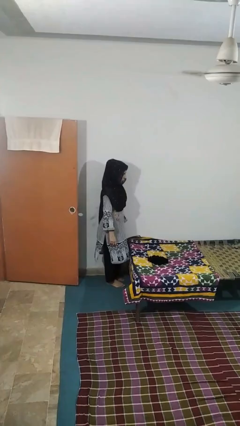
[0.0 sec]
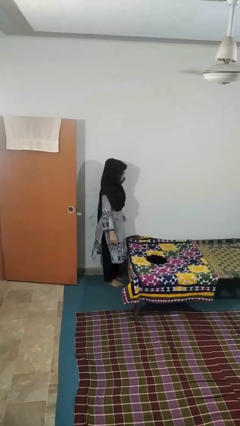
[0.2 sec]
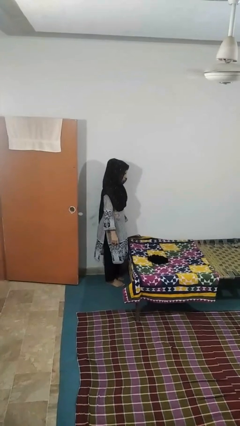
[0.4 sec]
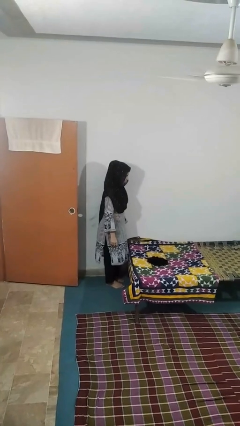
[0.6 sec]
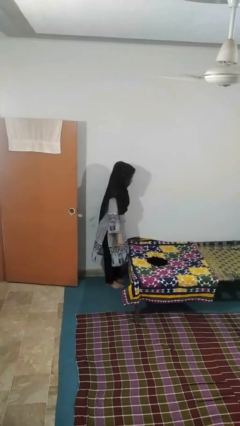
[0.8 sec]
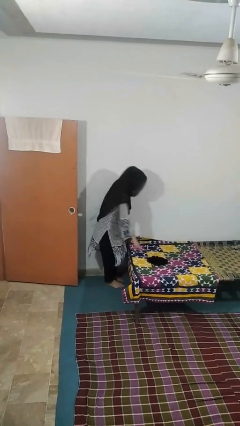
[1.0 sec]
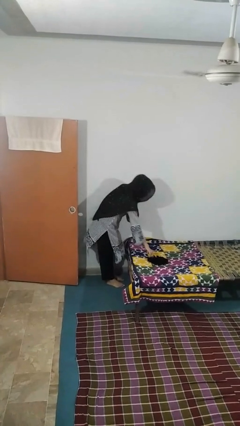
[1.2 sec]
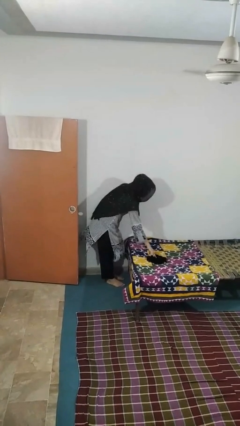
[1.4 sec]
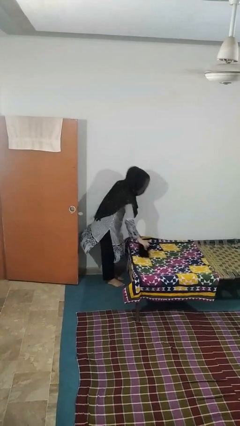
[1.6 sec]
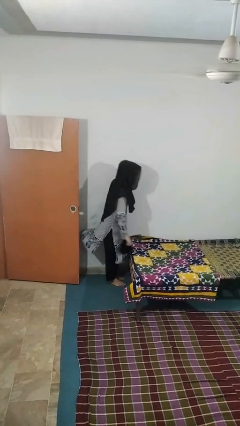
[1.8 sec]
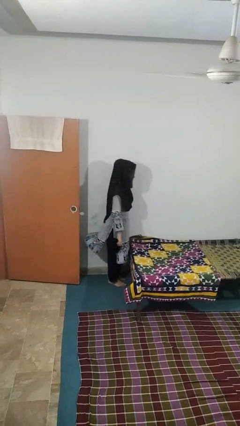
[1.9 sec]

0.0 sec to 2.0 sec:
person picks up object from bed

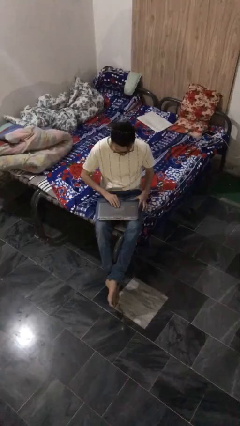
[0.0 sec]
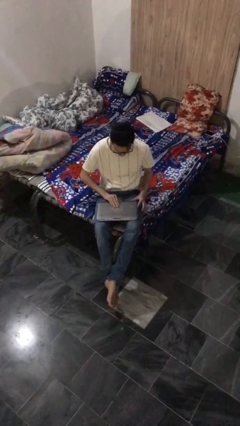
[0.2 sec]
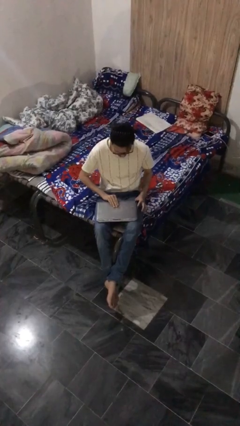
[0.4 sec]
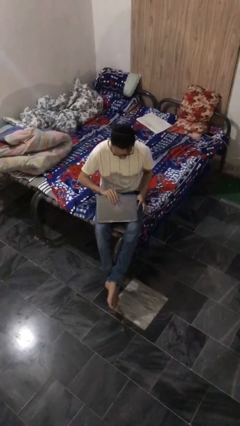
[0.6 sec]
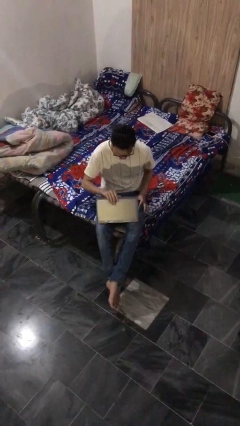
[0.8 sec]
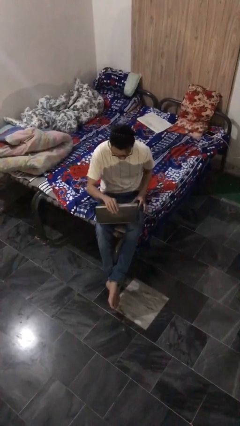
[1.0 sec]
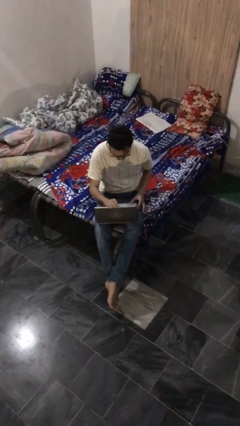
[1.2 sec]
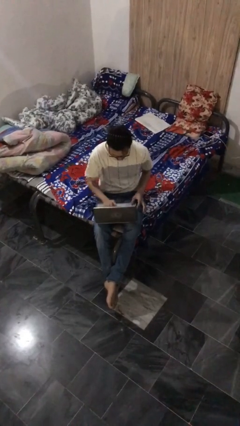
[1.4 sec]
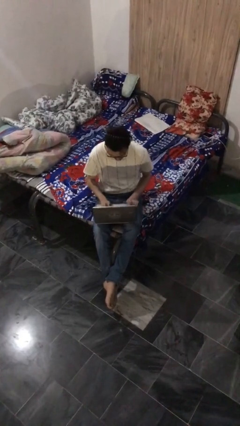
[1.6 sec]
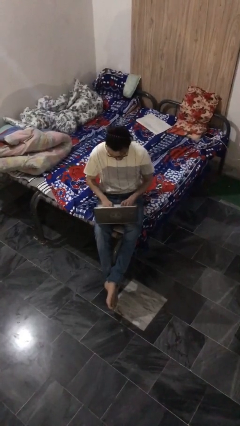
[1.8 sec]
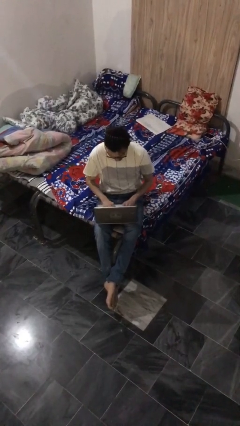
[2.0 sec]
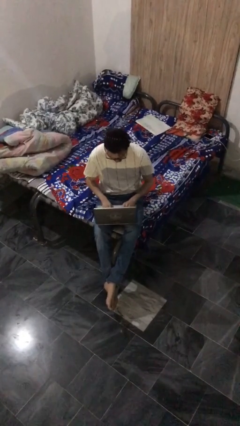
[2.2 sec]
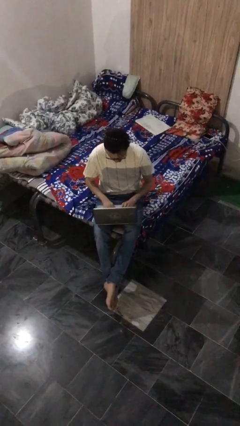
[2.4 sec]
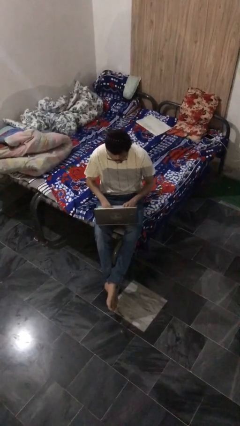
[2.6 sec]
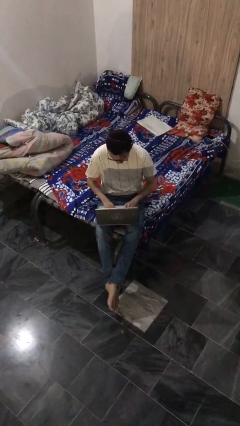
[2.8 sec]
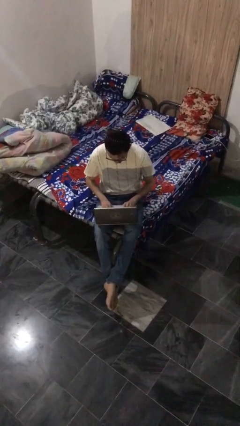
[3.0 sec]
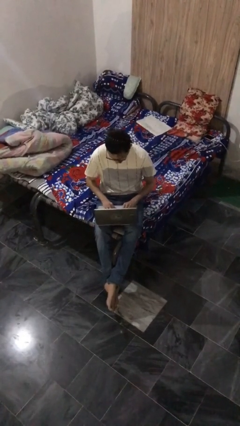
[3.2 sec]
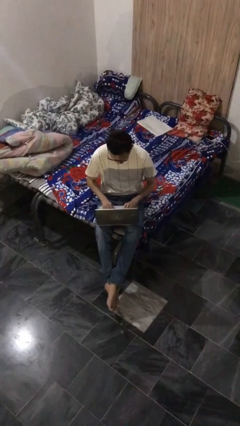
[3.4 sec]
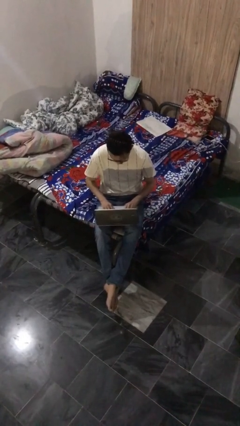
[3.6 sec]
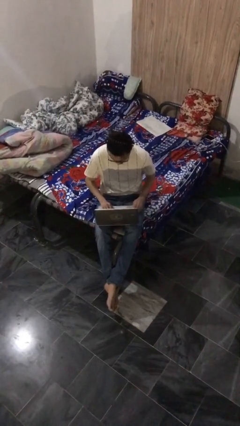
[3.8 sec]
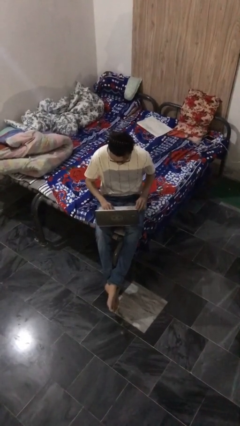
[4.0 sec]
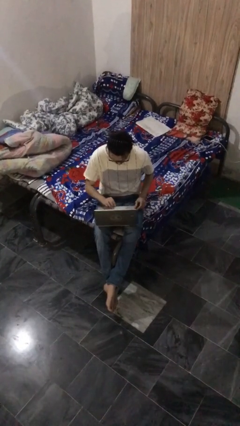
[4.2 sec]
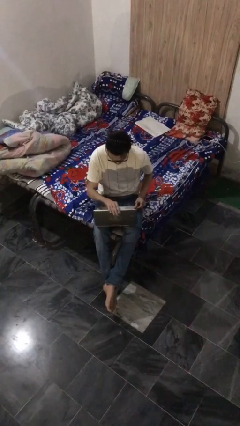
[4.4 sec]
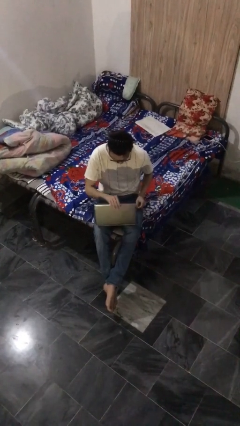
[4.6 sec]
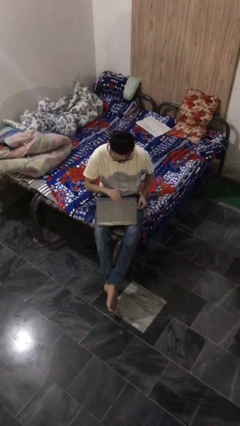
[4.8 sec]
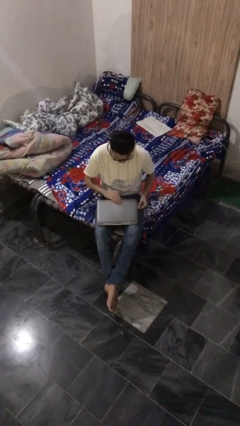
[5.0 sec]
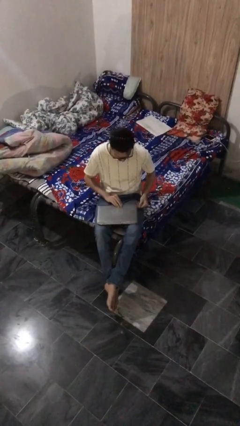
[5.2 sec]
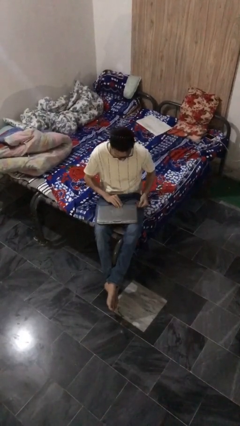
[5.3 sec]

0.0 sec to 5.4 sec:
person interacts with laptop

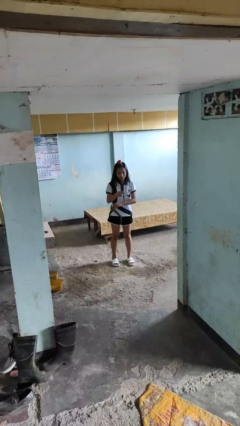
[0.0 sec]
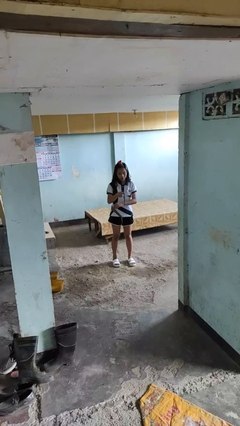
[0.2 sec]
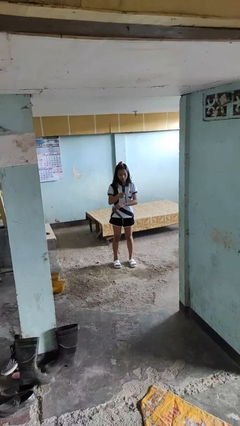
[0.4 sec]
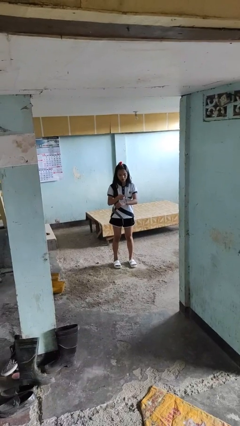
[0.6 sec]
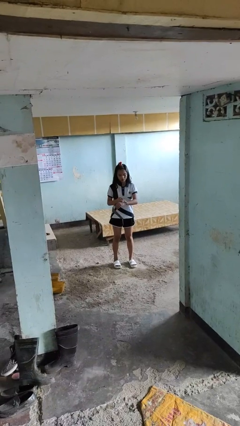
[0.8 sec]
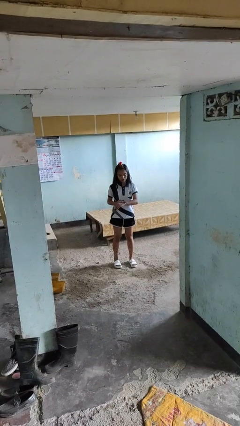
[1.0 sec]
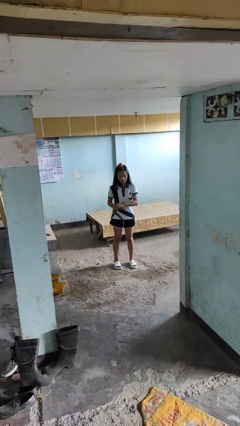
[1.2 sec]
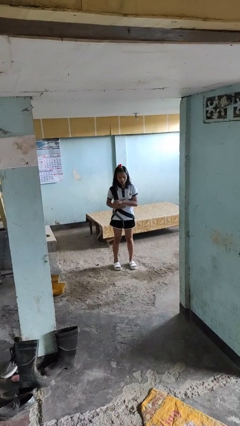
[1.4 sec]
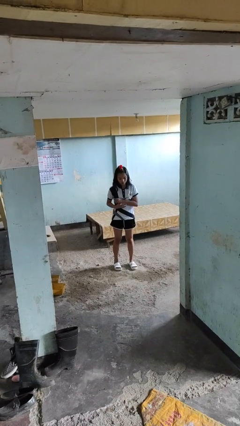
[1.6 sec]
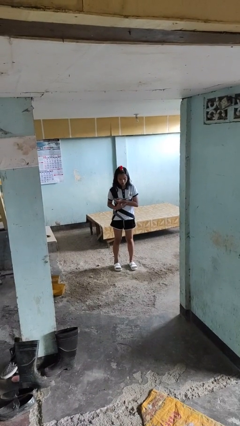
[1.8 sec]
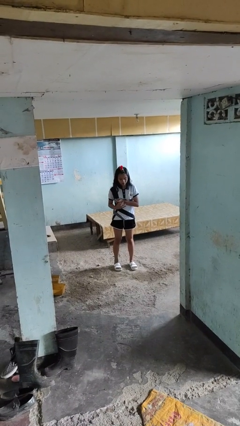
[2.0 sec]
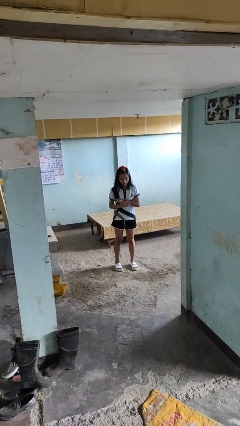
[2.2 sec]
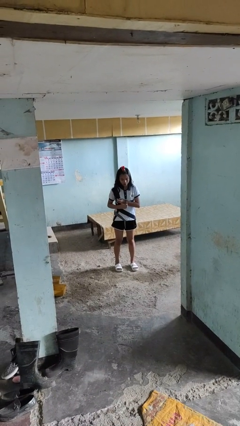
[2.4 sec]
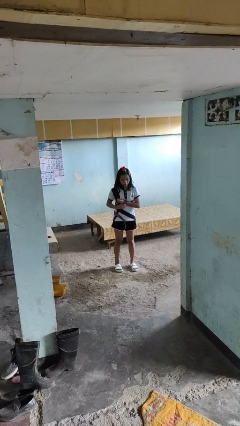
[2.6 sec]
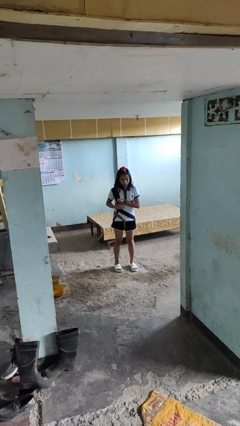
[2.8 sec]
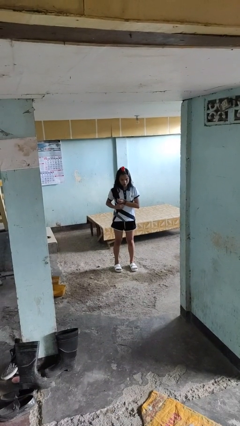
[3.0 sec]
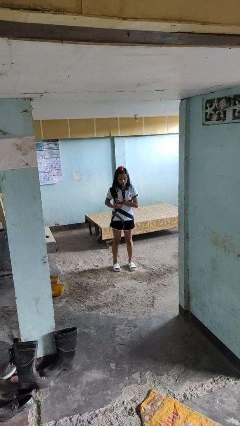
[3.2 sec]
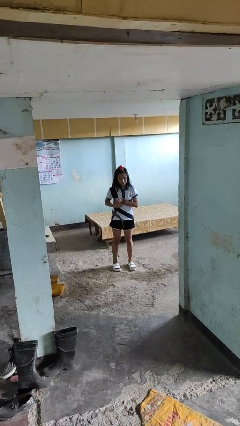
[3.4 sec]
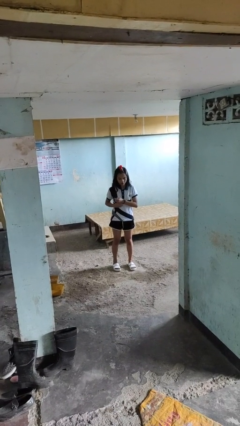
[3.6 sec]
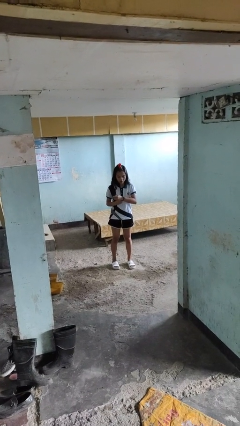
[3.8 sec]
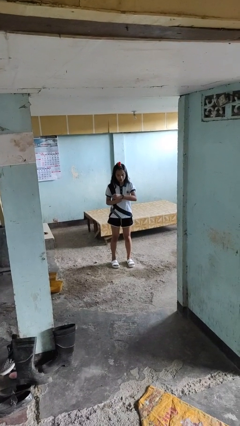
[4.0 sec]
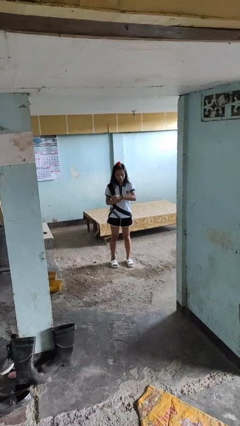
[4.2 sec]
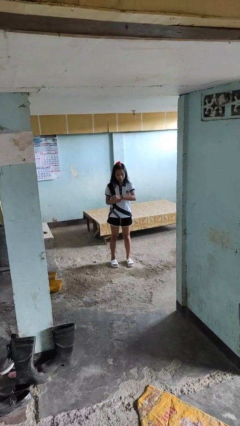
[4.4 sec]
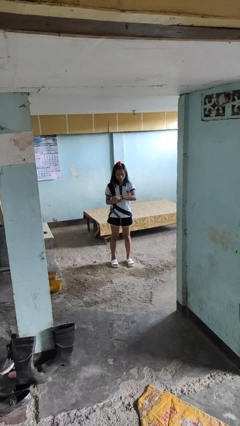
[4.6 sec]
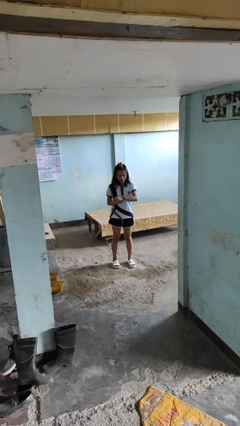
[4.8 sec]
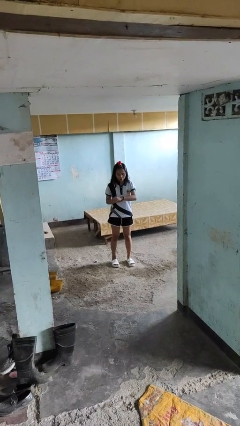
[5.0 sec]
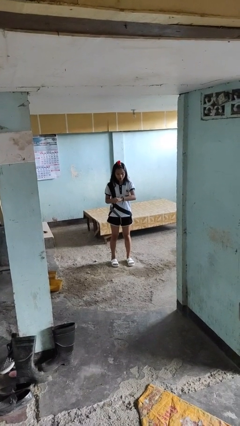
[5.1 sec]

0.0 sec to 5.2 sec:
person puts on wristwatch

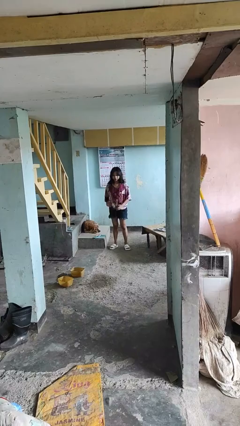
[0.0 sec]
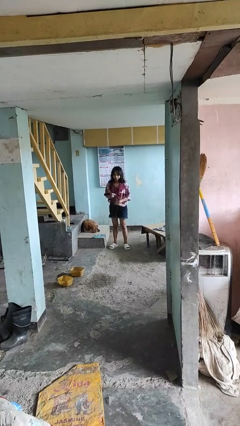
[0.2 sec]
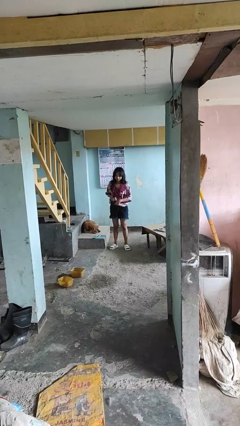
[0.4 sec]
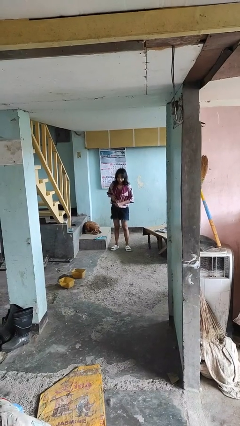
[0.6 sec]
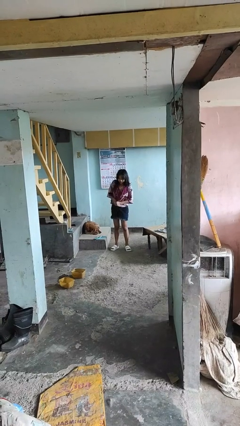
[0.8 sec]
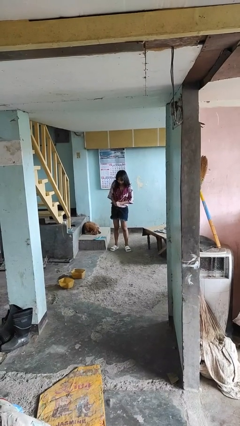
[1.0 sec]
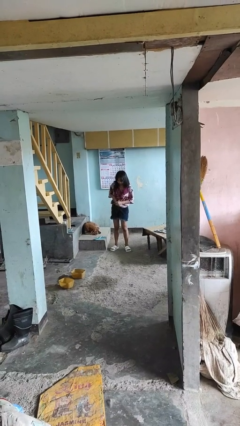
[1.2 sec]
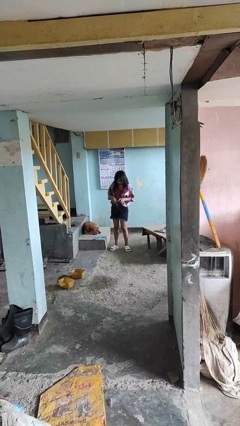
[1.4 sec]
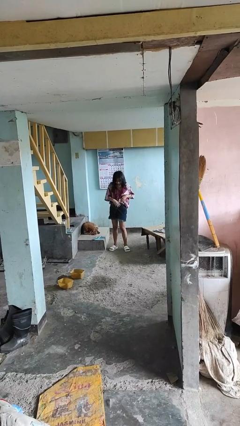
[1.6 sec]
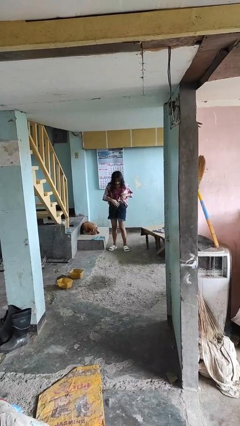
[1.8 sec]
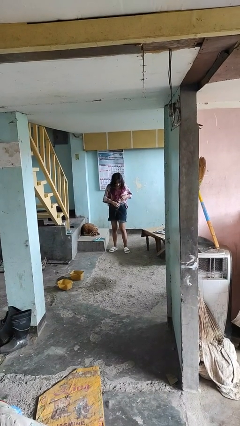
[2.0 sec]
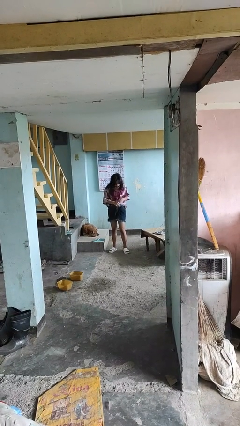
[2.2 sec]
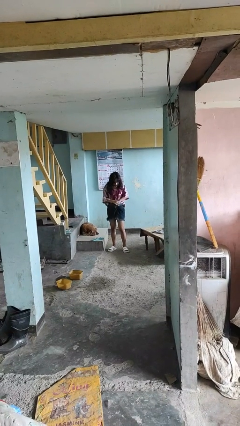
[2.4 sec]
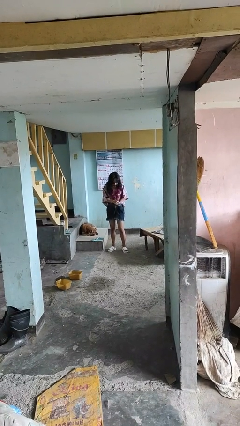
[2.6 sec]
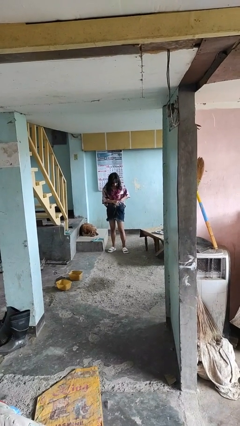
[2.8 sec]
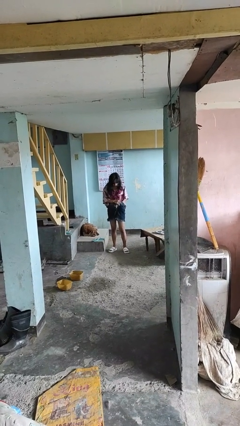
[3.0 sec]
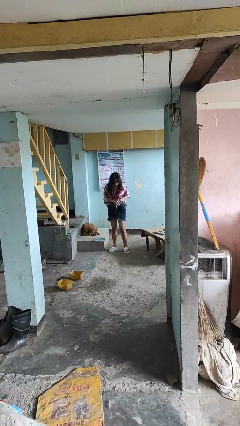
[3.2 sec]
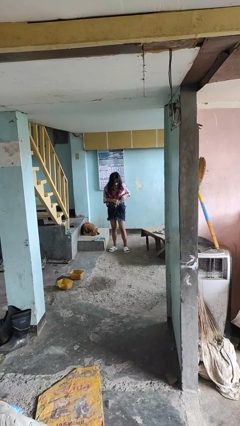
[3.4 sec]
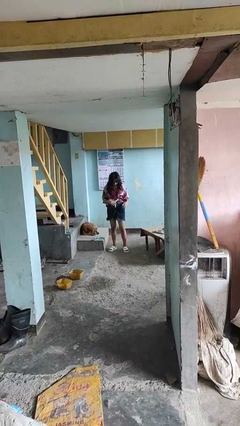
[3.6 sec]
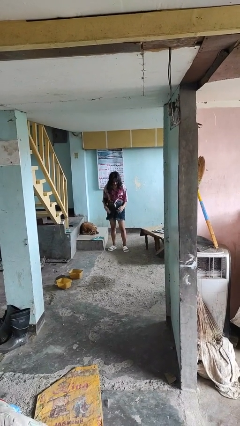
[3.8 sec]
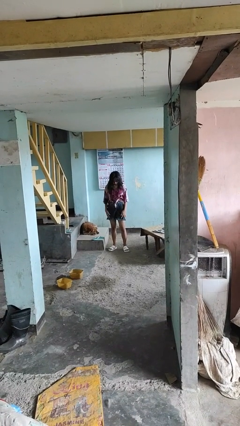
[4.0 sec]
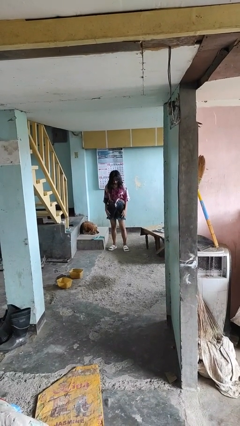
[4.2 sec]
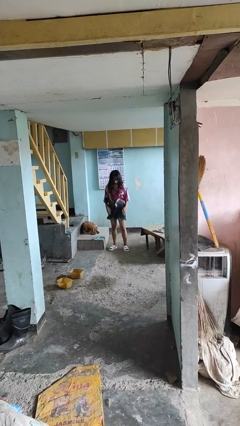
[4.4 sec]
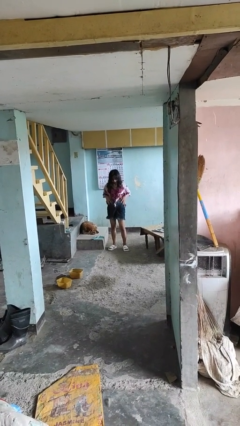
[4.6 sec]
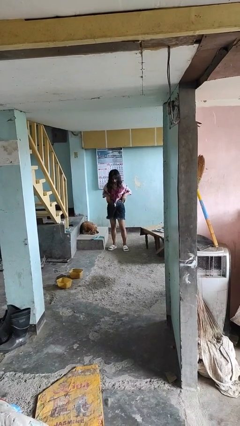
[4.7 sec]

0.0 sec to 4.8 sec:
person tucks in shirt
